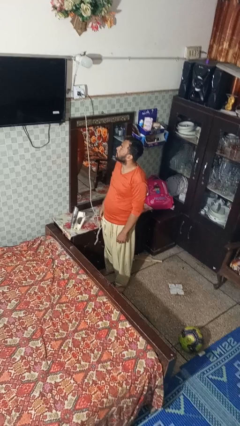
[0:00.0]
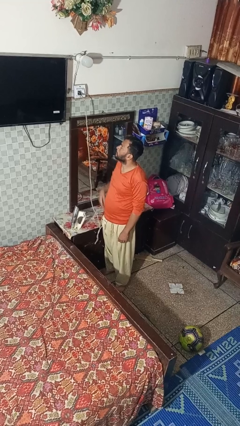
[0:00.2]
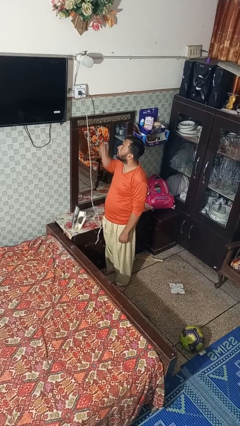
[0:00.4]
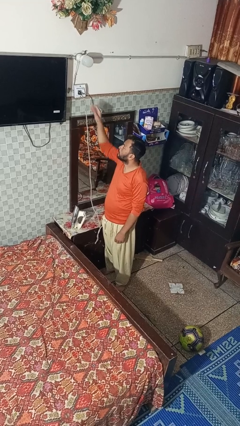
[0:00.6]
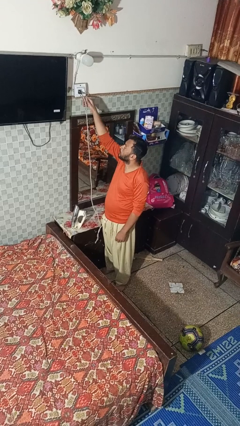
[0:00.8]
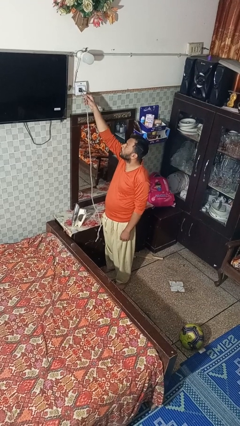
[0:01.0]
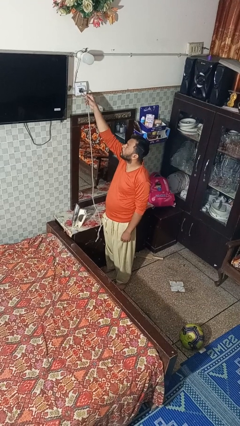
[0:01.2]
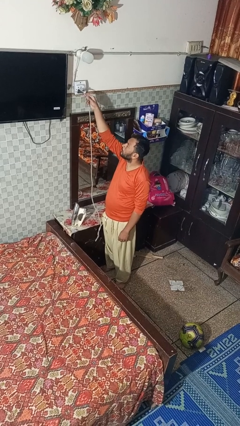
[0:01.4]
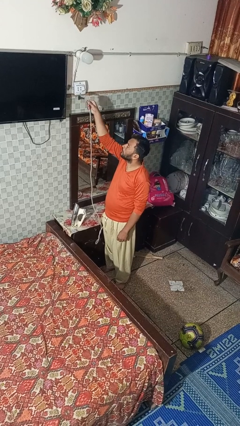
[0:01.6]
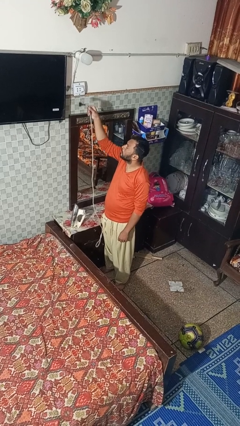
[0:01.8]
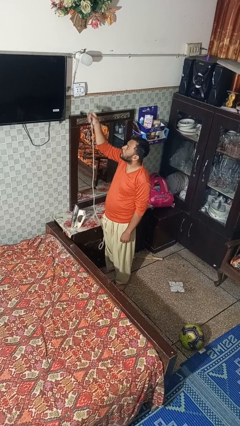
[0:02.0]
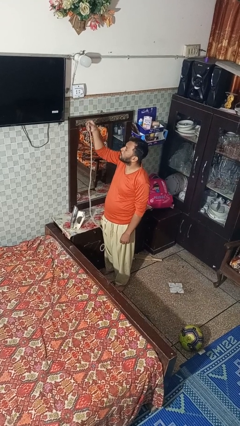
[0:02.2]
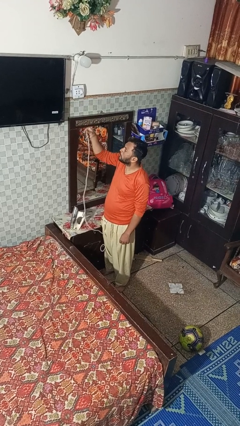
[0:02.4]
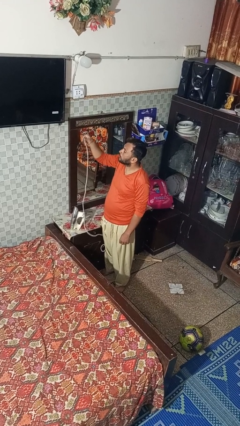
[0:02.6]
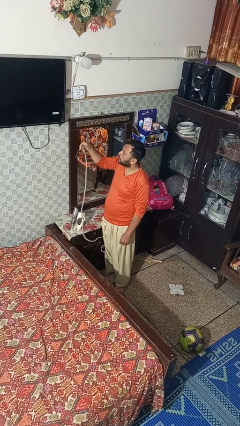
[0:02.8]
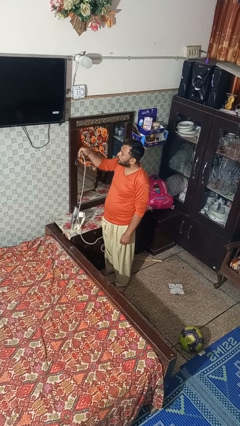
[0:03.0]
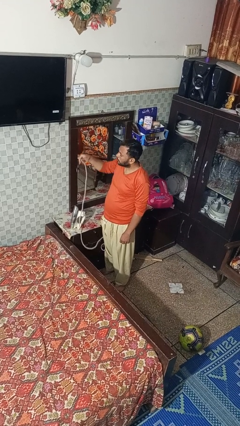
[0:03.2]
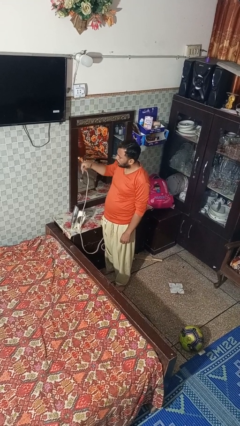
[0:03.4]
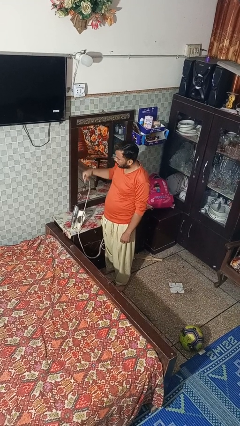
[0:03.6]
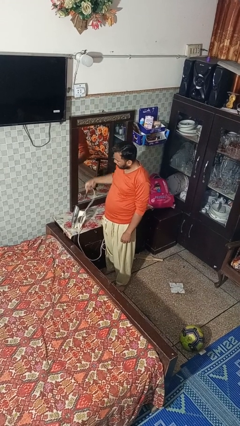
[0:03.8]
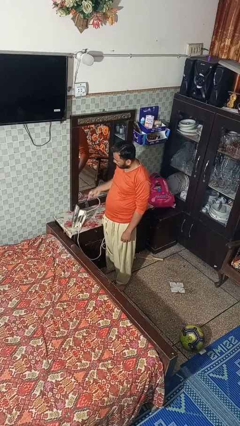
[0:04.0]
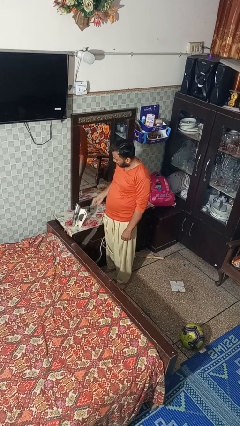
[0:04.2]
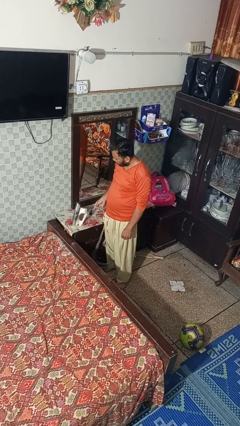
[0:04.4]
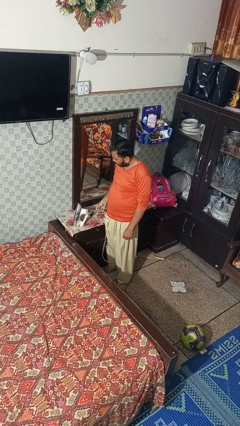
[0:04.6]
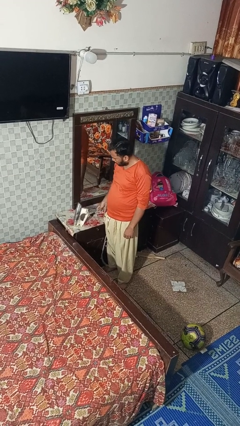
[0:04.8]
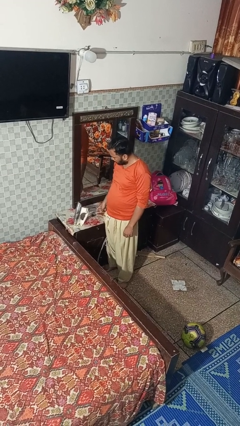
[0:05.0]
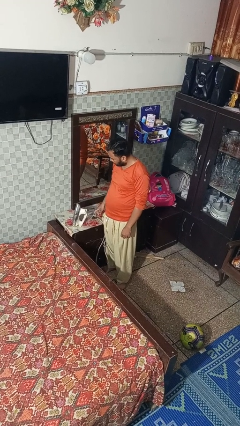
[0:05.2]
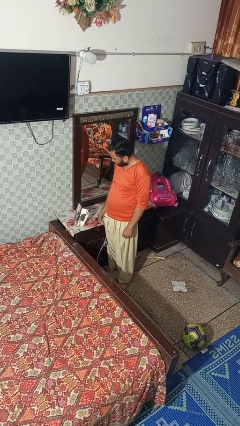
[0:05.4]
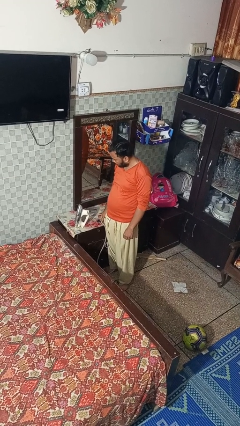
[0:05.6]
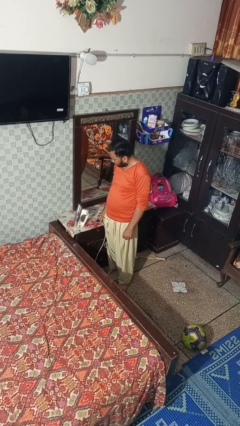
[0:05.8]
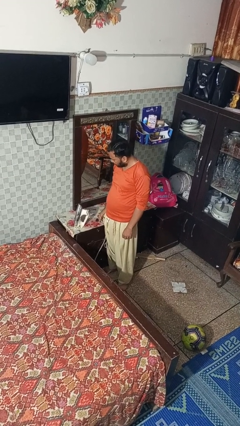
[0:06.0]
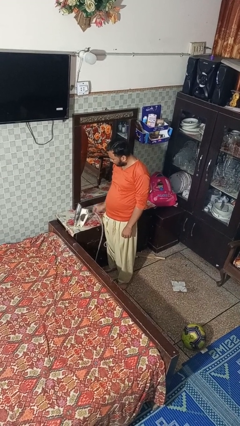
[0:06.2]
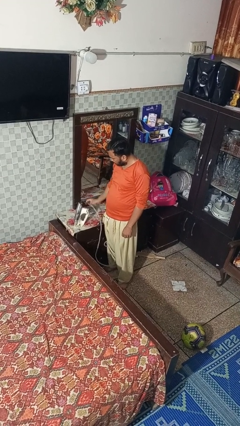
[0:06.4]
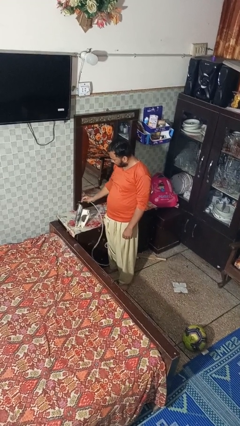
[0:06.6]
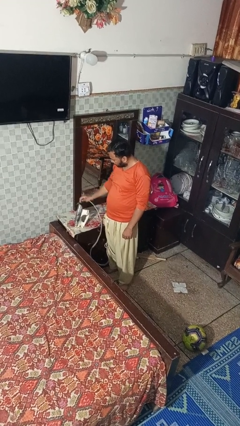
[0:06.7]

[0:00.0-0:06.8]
person unplugs from electrical socket

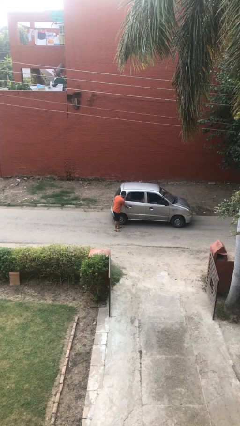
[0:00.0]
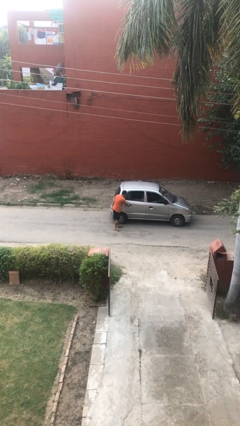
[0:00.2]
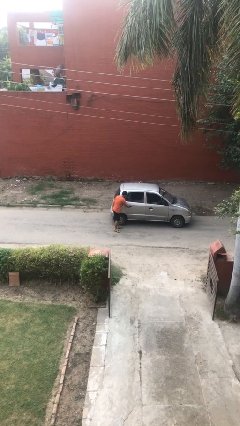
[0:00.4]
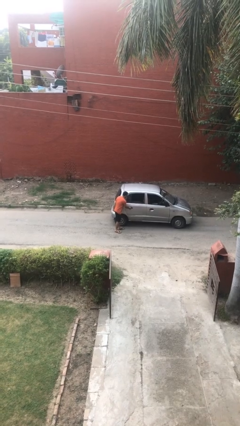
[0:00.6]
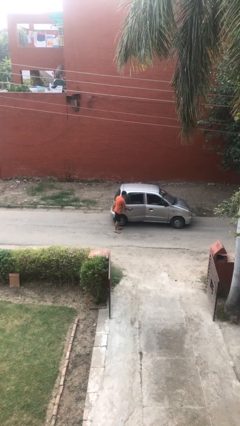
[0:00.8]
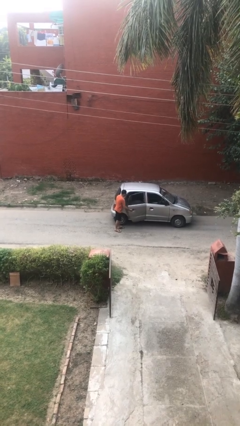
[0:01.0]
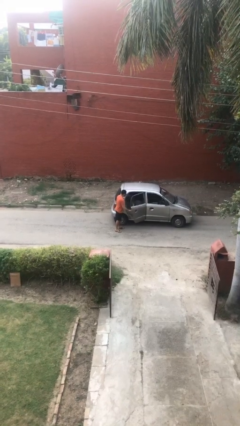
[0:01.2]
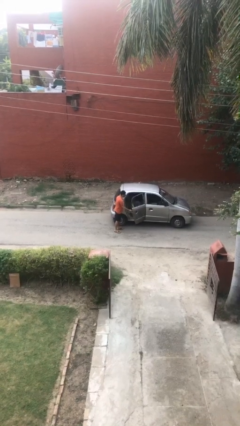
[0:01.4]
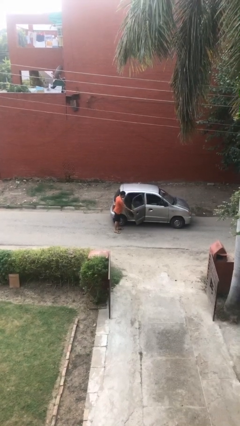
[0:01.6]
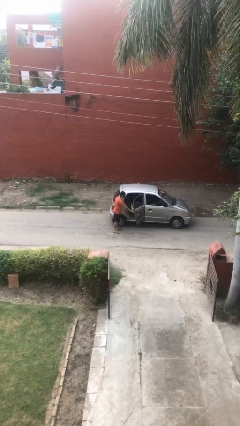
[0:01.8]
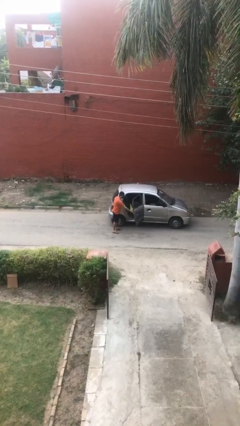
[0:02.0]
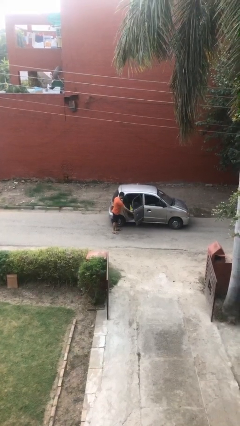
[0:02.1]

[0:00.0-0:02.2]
person opens car door

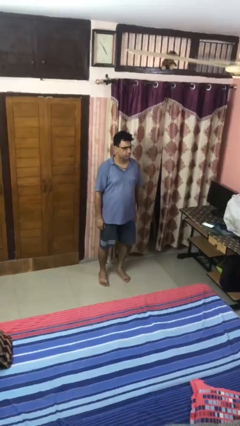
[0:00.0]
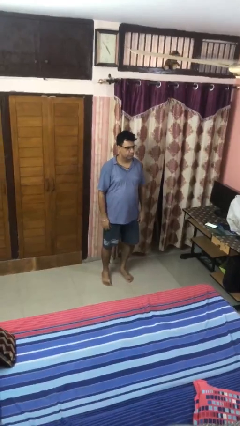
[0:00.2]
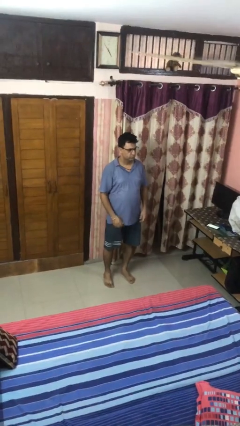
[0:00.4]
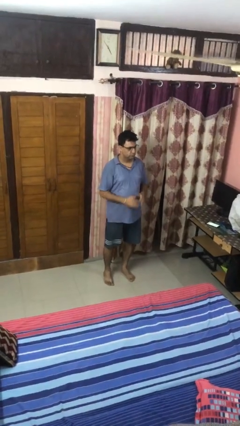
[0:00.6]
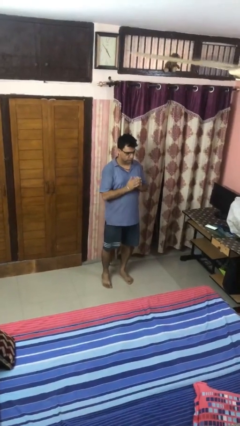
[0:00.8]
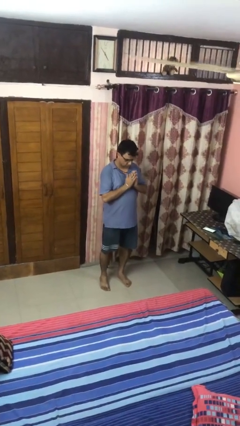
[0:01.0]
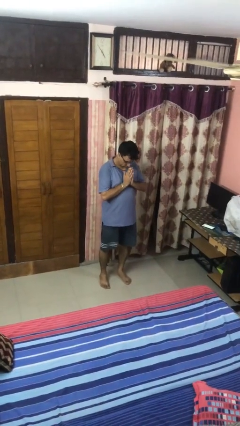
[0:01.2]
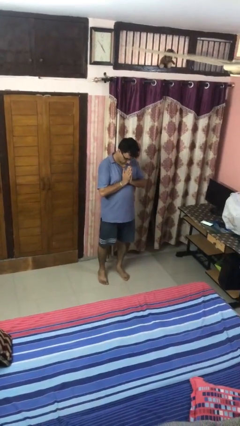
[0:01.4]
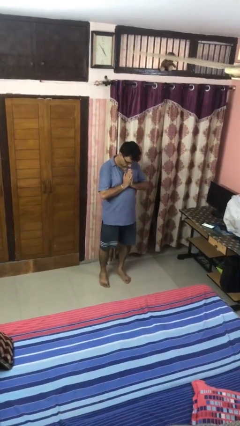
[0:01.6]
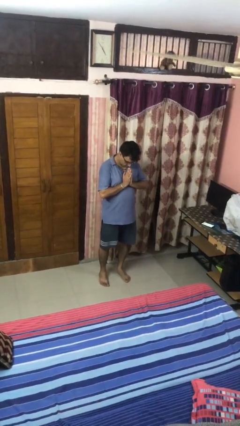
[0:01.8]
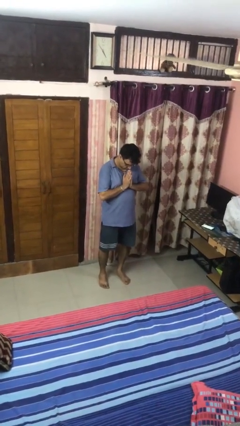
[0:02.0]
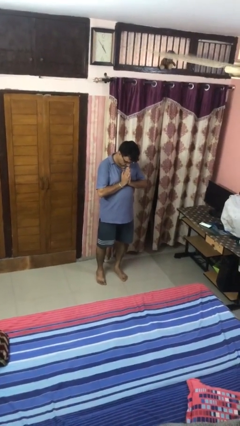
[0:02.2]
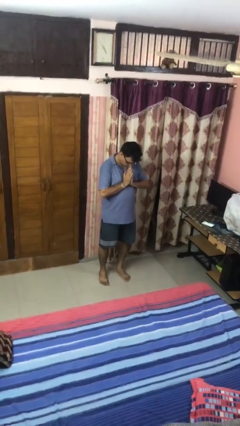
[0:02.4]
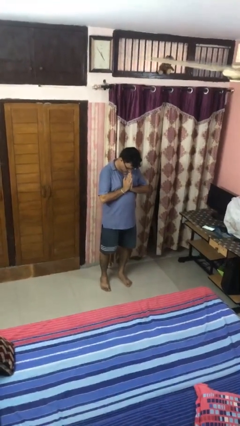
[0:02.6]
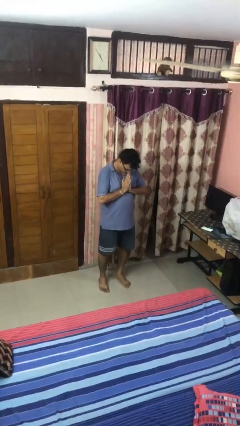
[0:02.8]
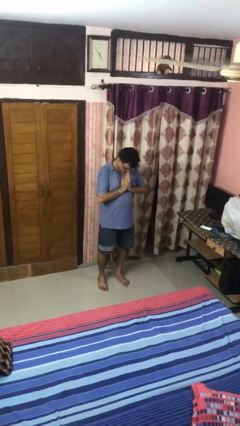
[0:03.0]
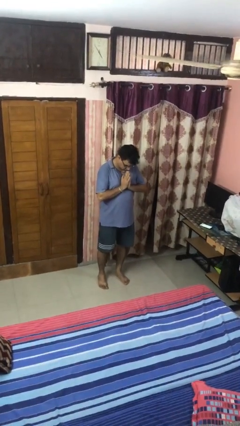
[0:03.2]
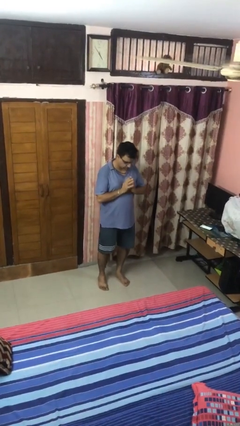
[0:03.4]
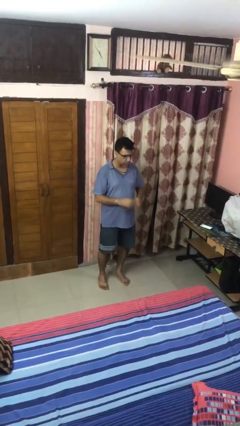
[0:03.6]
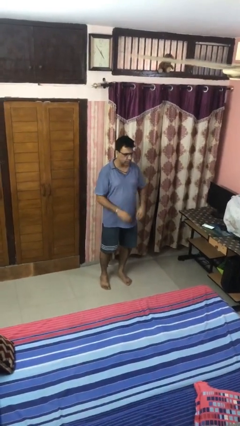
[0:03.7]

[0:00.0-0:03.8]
person prays

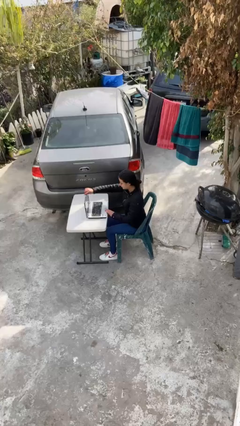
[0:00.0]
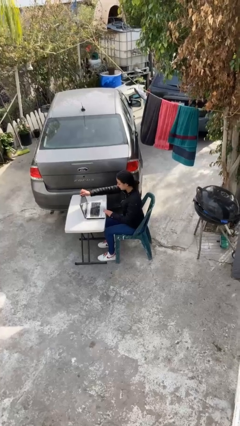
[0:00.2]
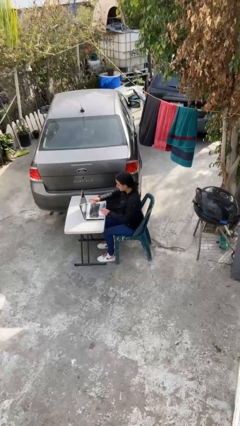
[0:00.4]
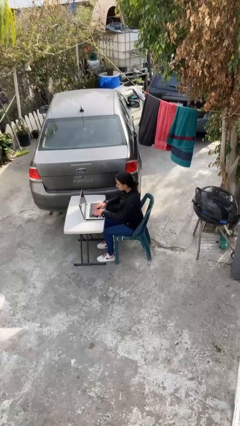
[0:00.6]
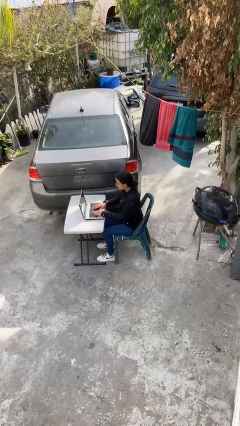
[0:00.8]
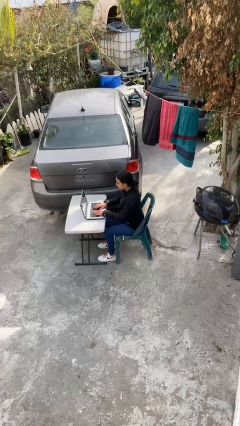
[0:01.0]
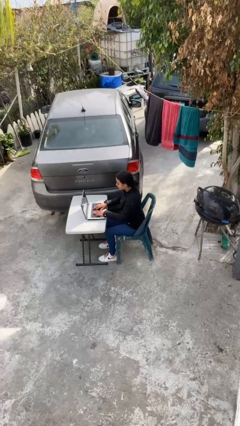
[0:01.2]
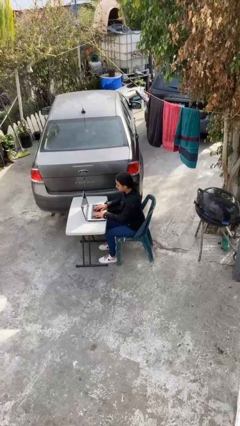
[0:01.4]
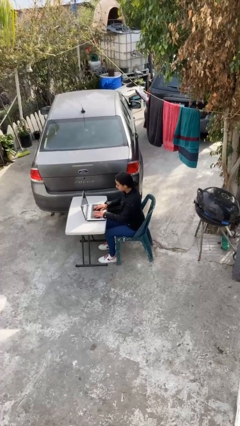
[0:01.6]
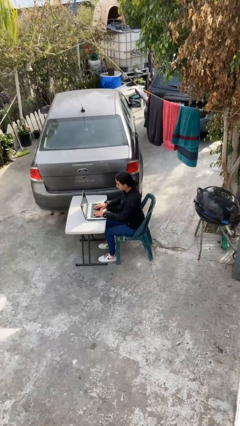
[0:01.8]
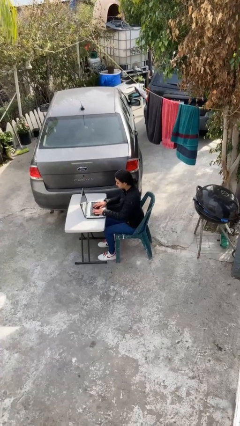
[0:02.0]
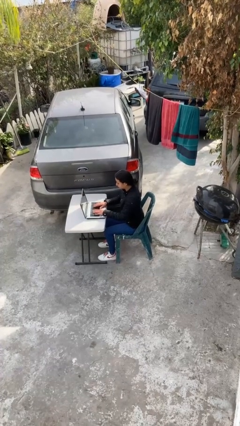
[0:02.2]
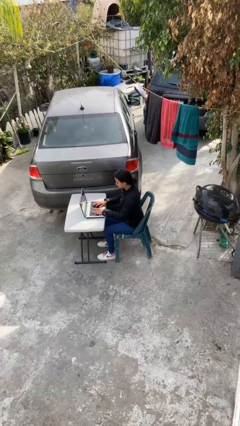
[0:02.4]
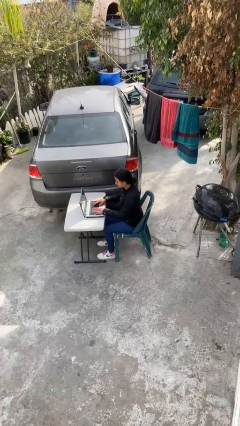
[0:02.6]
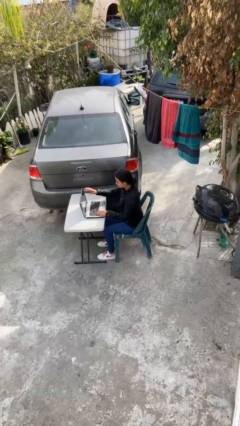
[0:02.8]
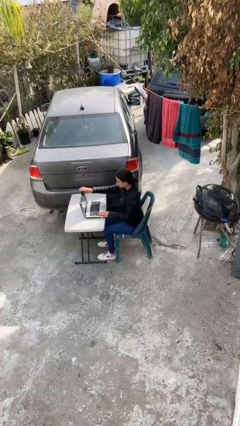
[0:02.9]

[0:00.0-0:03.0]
person interacts with laptop

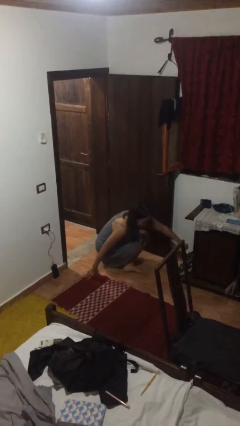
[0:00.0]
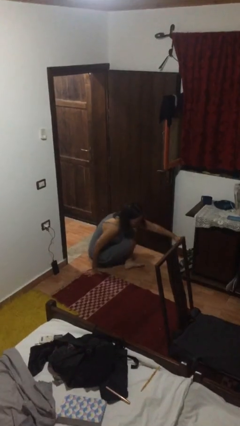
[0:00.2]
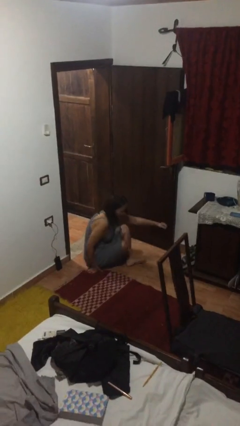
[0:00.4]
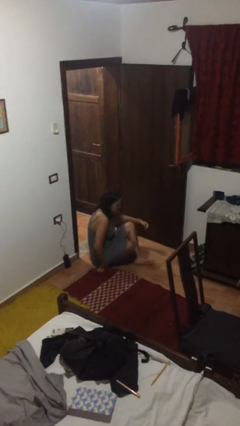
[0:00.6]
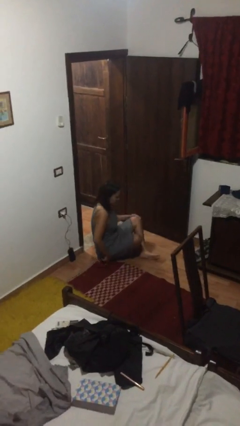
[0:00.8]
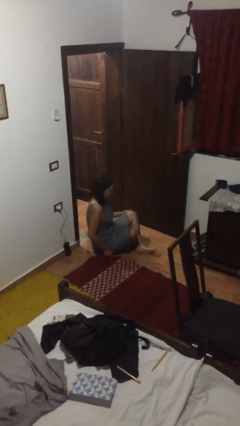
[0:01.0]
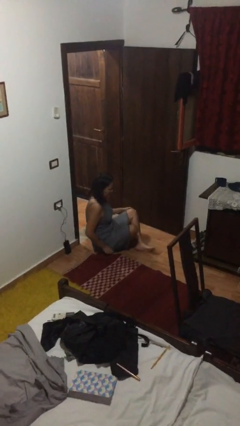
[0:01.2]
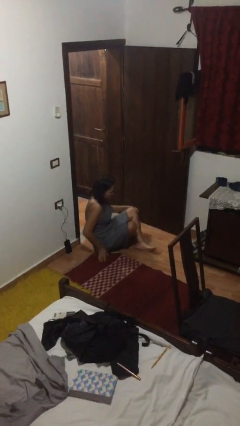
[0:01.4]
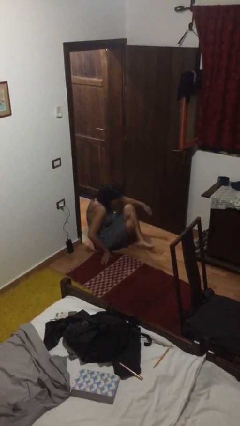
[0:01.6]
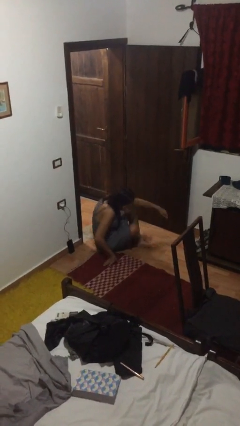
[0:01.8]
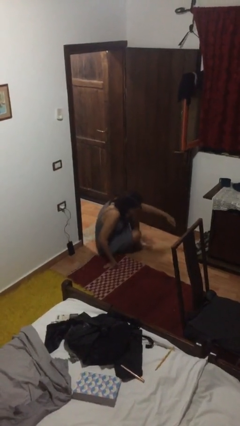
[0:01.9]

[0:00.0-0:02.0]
person sits crisscross
